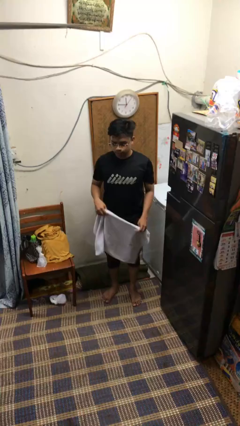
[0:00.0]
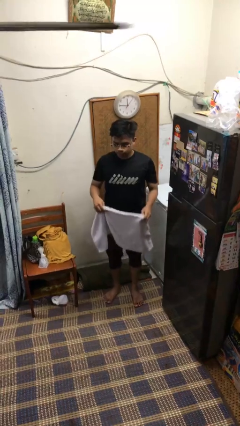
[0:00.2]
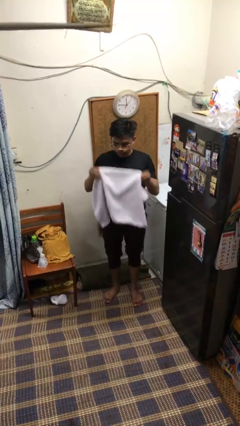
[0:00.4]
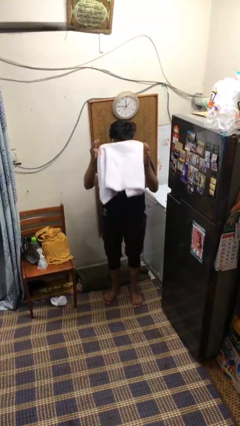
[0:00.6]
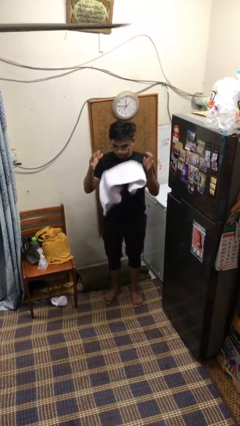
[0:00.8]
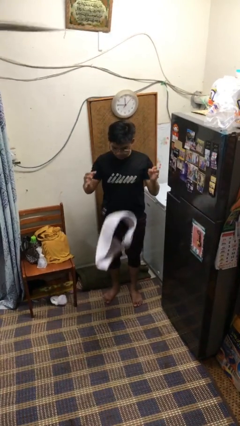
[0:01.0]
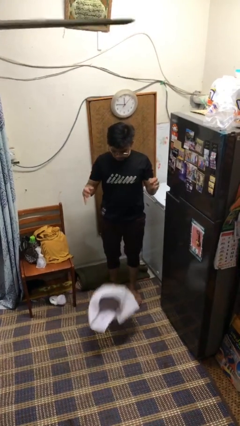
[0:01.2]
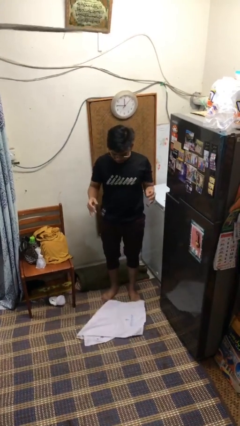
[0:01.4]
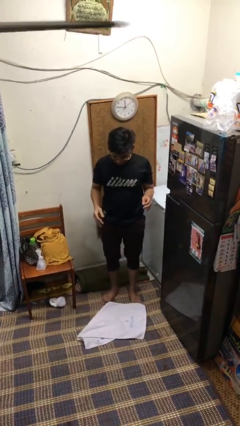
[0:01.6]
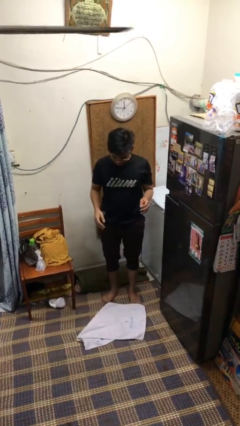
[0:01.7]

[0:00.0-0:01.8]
person throws object into air

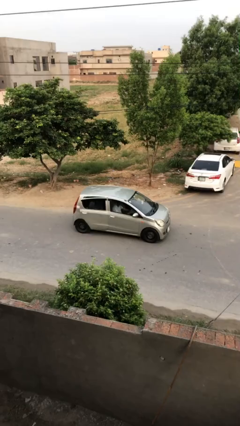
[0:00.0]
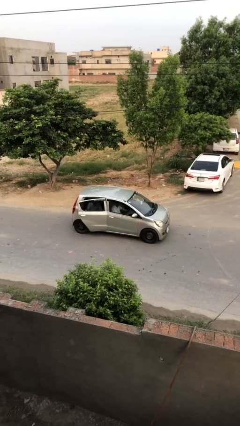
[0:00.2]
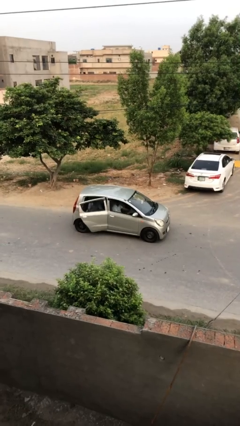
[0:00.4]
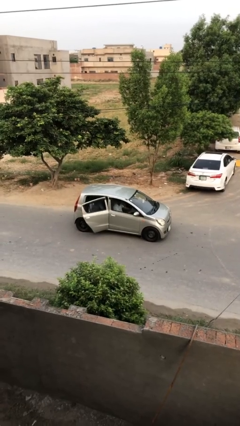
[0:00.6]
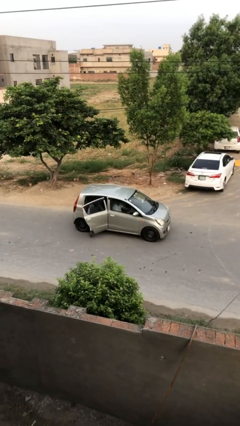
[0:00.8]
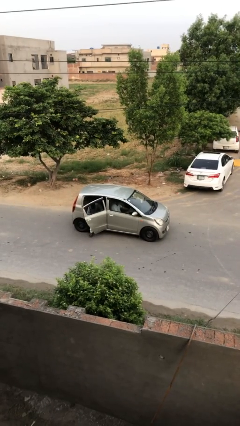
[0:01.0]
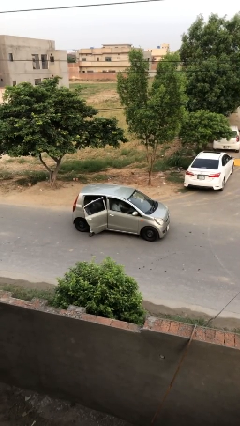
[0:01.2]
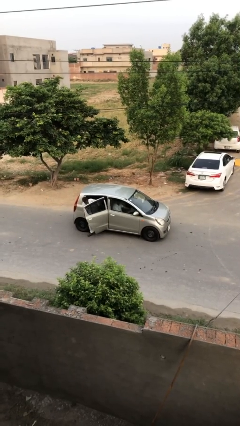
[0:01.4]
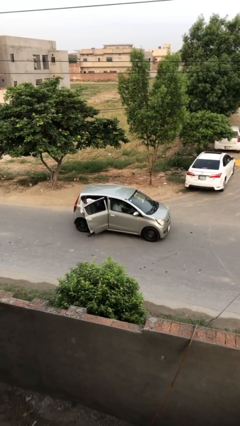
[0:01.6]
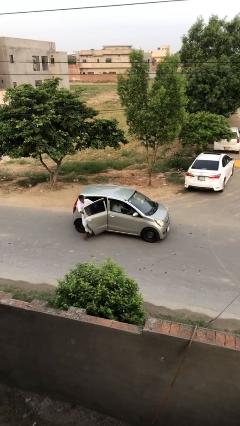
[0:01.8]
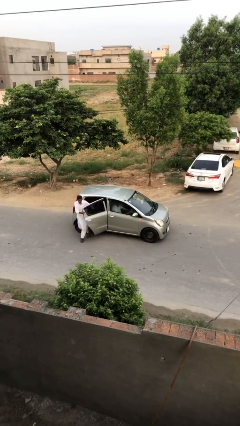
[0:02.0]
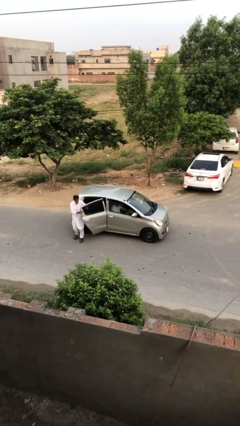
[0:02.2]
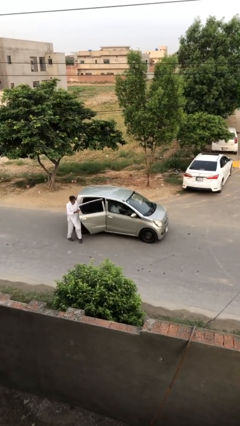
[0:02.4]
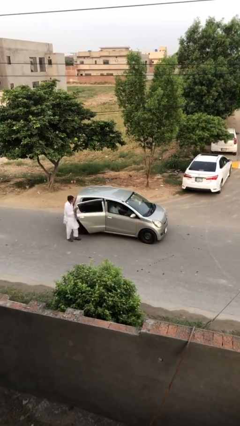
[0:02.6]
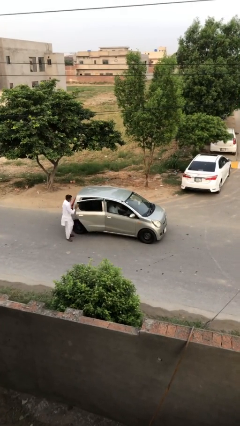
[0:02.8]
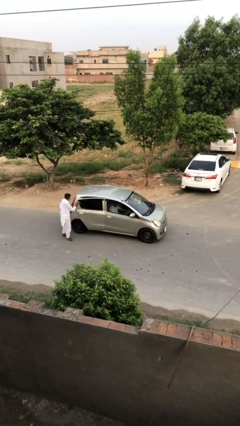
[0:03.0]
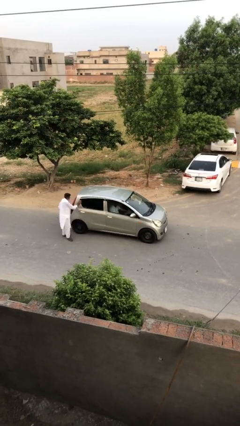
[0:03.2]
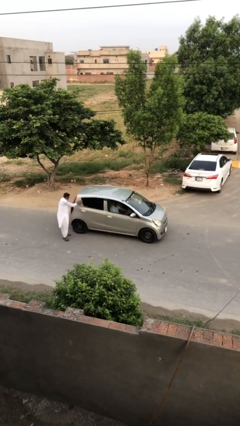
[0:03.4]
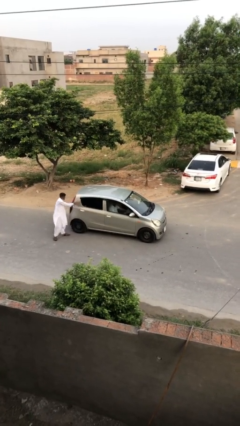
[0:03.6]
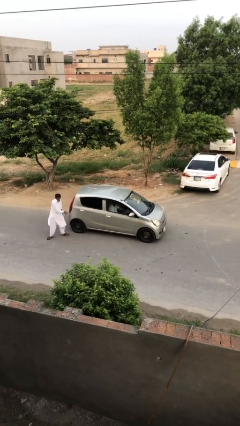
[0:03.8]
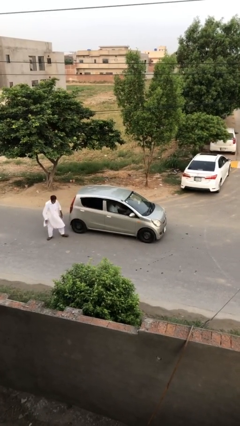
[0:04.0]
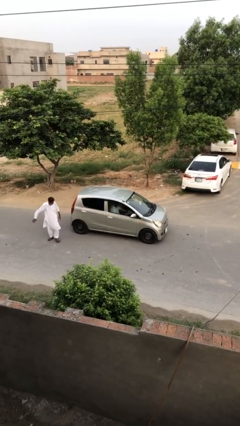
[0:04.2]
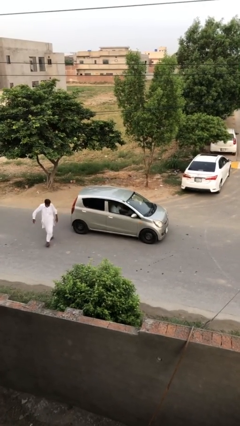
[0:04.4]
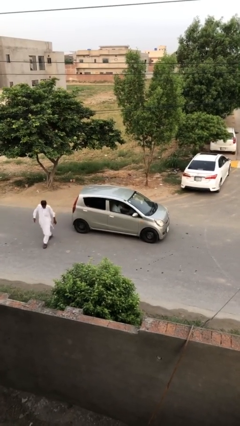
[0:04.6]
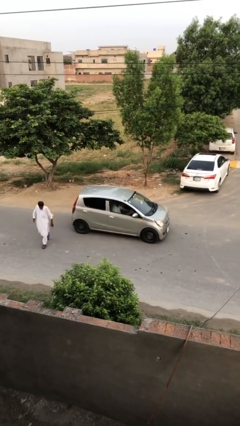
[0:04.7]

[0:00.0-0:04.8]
car drops off person

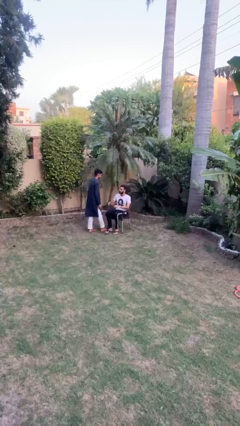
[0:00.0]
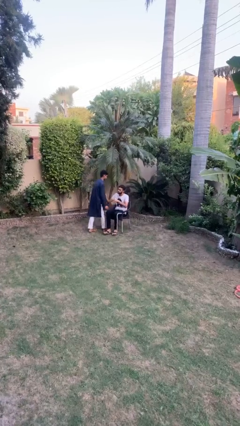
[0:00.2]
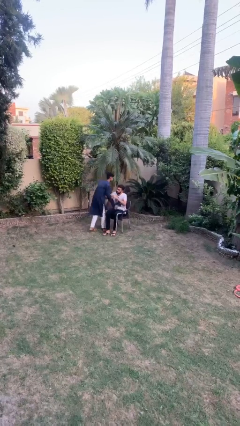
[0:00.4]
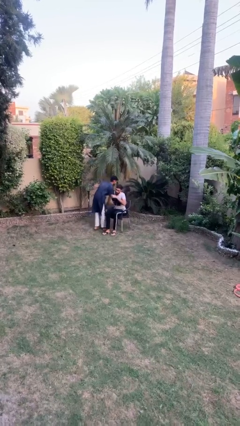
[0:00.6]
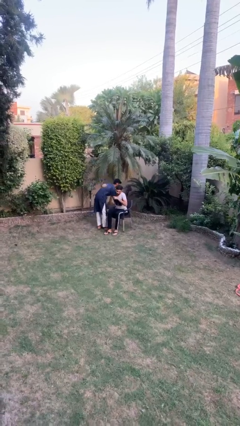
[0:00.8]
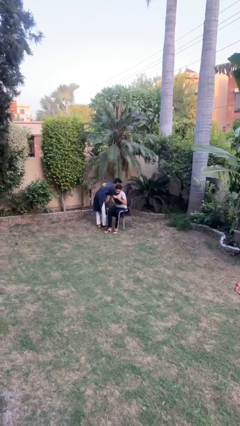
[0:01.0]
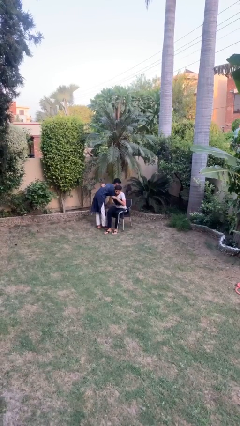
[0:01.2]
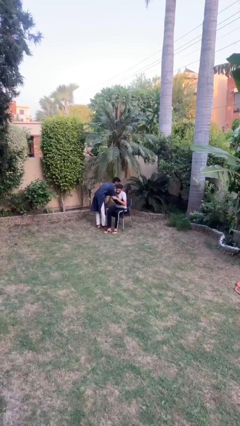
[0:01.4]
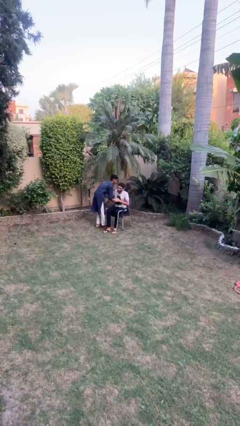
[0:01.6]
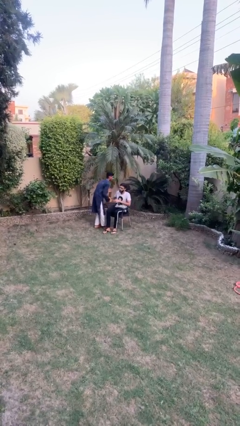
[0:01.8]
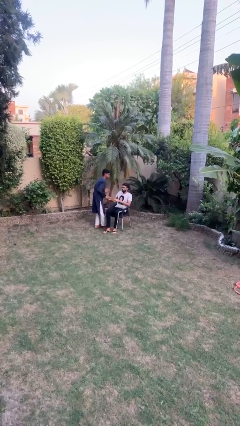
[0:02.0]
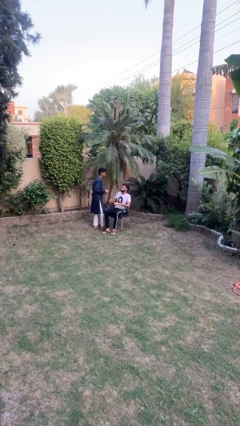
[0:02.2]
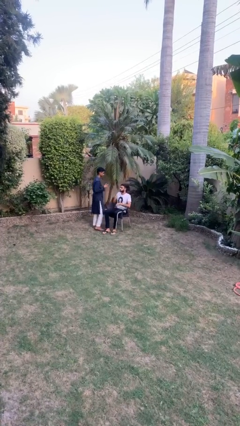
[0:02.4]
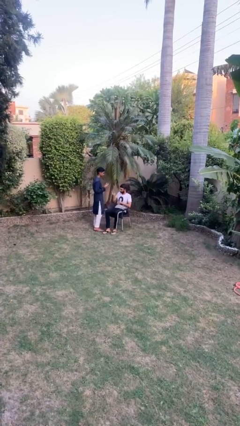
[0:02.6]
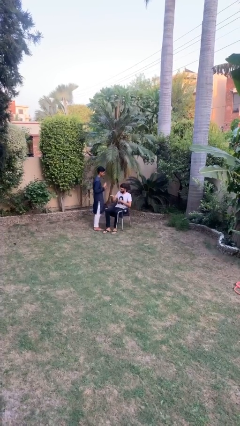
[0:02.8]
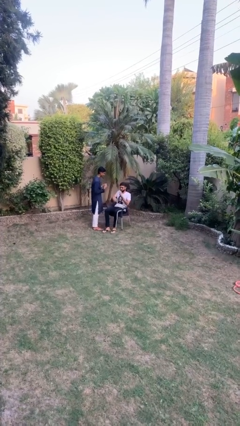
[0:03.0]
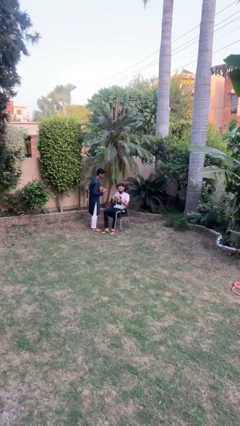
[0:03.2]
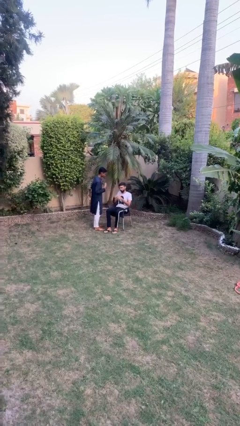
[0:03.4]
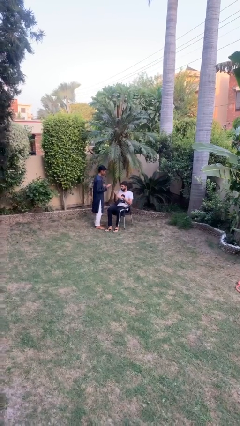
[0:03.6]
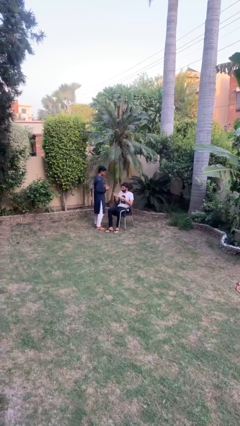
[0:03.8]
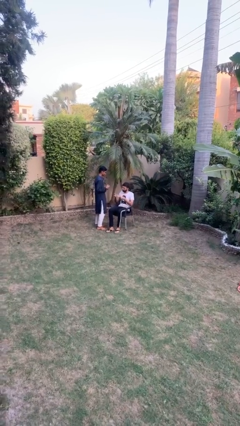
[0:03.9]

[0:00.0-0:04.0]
person embraces person

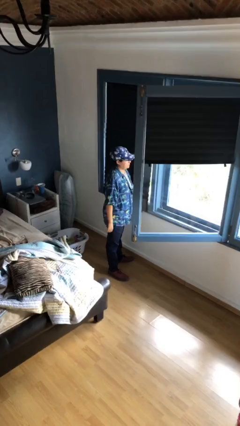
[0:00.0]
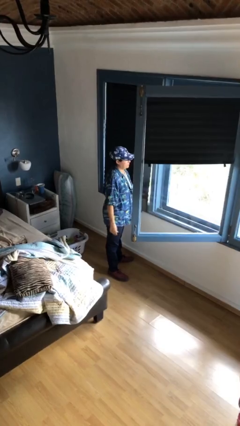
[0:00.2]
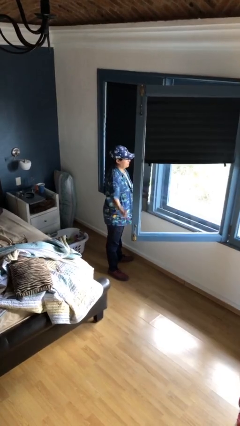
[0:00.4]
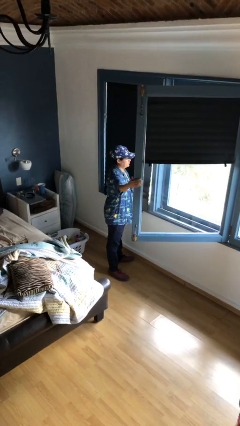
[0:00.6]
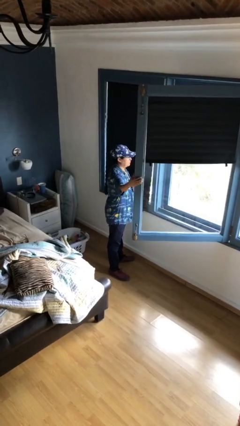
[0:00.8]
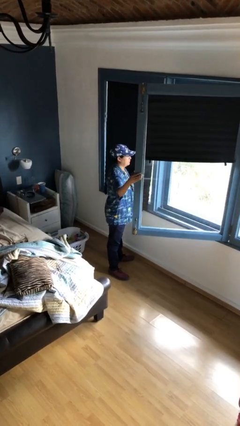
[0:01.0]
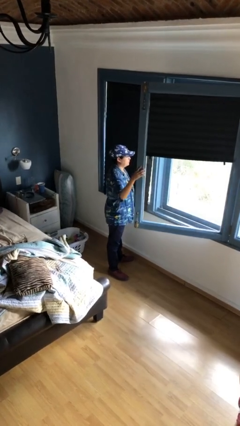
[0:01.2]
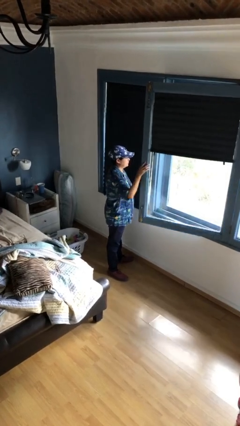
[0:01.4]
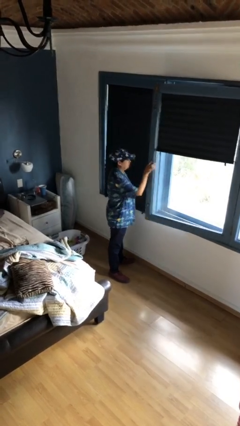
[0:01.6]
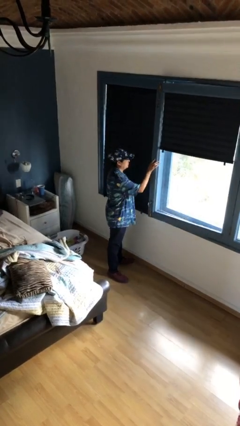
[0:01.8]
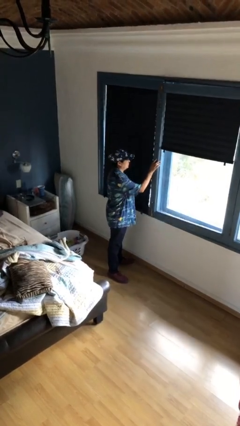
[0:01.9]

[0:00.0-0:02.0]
person closes home window

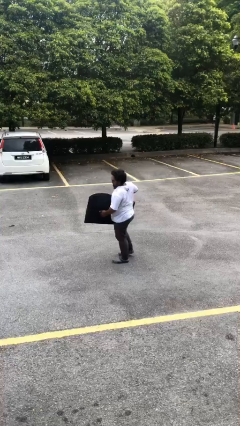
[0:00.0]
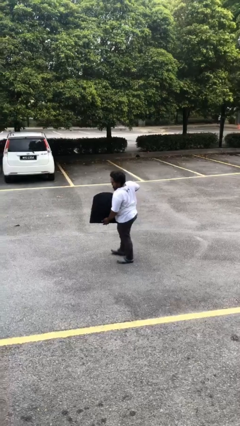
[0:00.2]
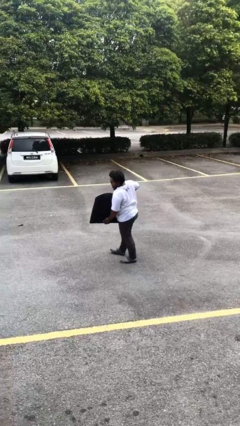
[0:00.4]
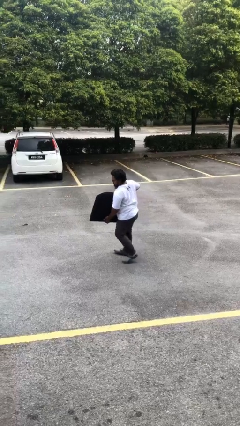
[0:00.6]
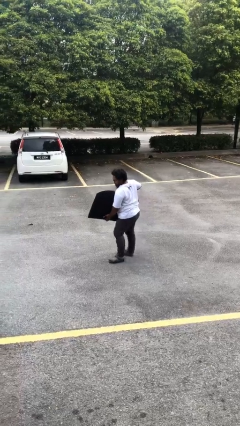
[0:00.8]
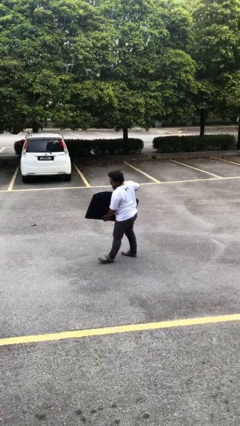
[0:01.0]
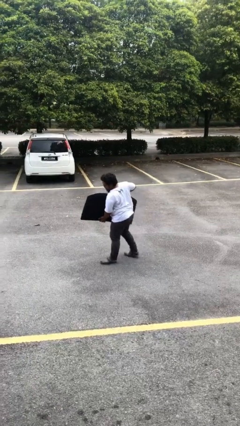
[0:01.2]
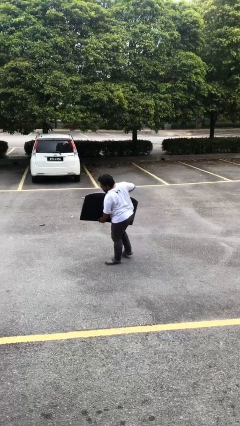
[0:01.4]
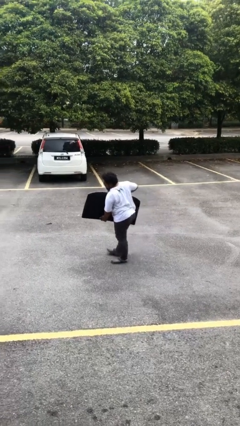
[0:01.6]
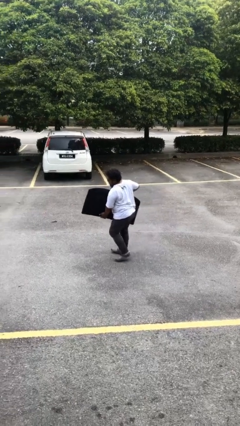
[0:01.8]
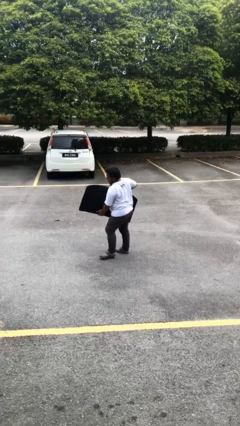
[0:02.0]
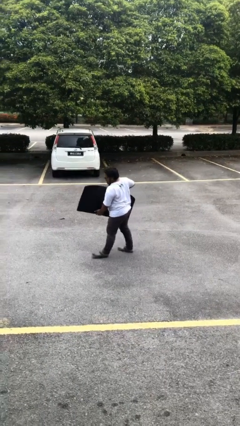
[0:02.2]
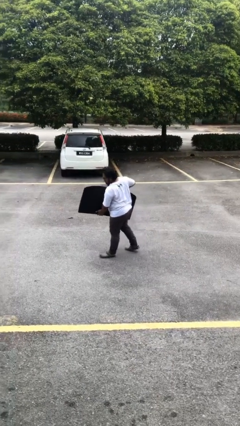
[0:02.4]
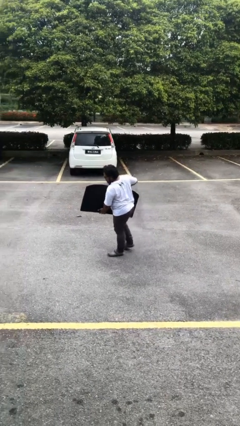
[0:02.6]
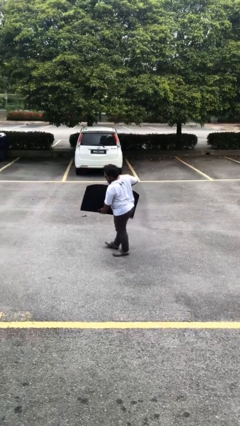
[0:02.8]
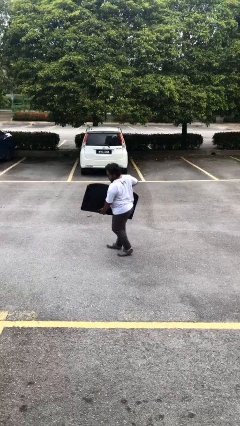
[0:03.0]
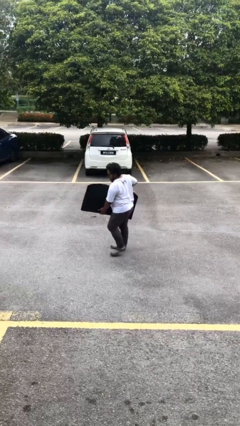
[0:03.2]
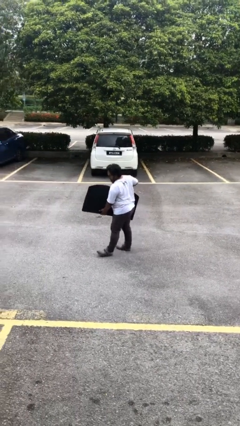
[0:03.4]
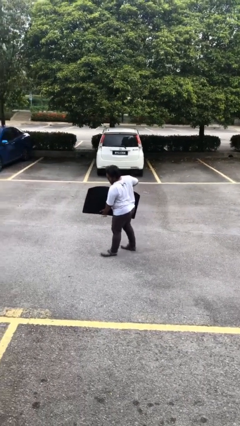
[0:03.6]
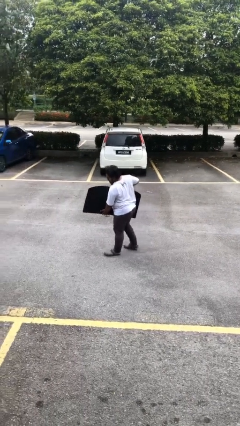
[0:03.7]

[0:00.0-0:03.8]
person carries heavy object

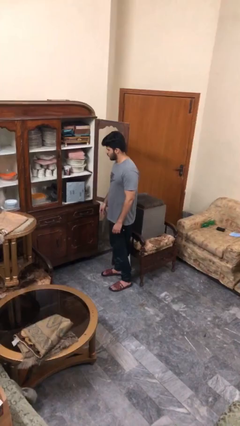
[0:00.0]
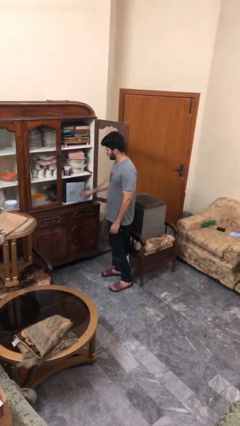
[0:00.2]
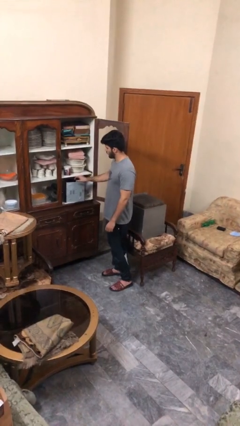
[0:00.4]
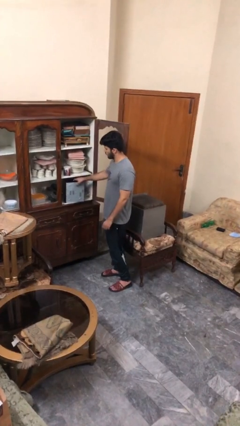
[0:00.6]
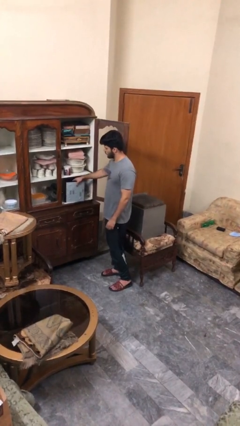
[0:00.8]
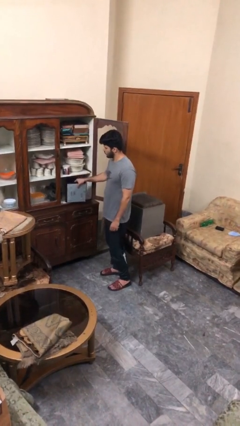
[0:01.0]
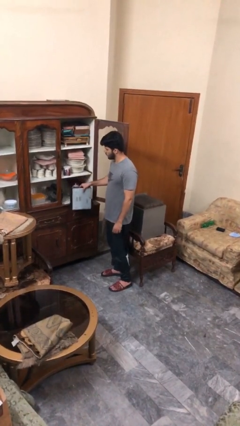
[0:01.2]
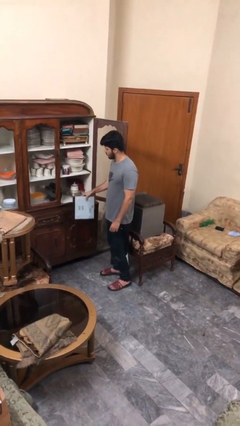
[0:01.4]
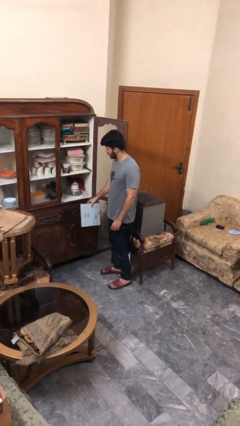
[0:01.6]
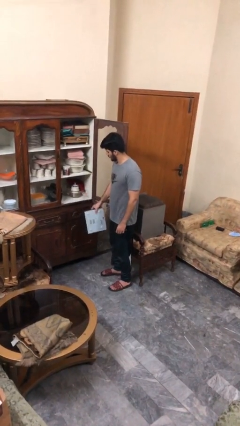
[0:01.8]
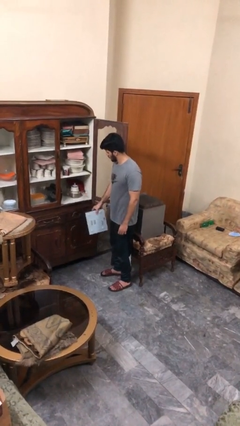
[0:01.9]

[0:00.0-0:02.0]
person picks up object from countertop
